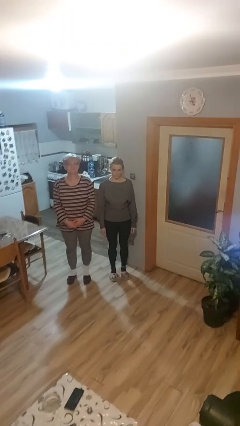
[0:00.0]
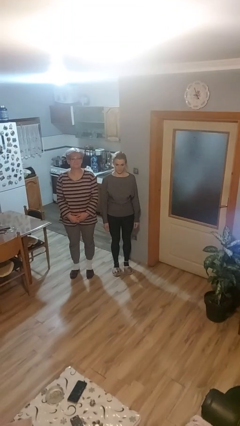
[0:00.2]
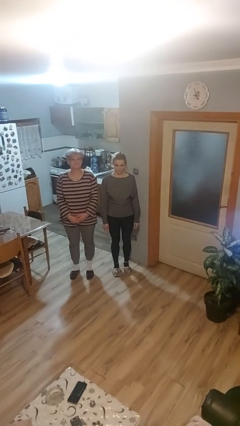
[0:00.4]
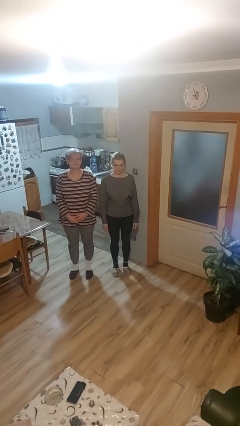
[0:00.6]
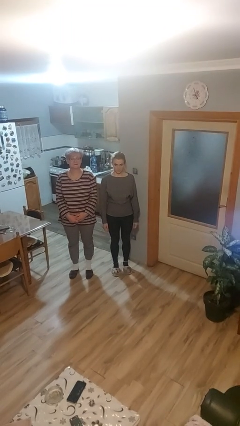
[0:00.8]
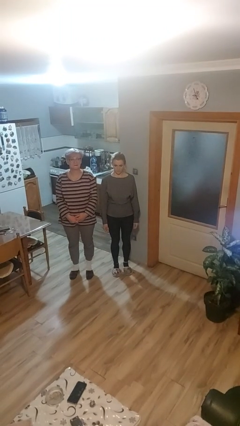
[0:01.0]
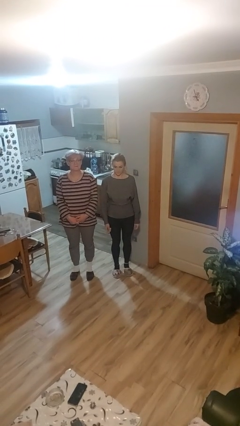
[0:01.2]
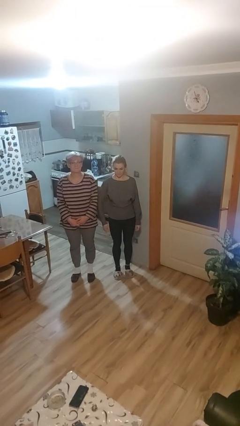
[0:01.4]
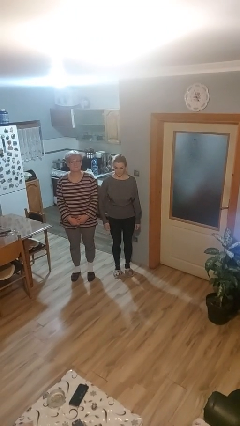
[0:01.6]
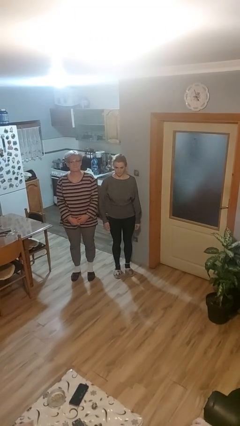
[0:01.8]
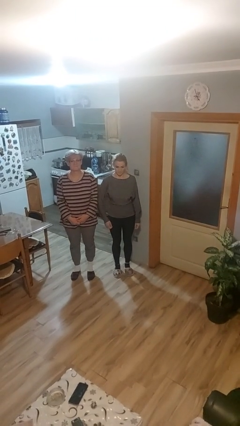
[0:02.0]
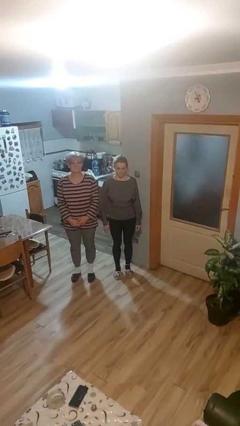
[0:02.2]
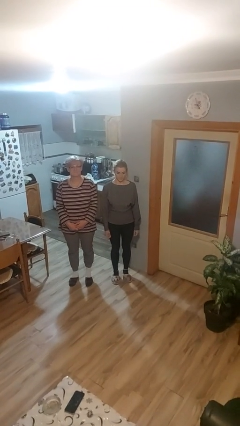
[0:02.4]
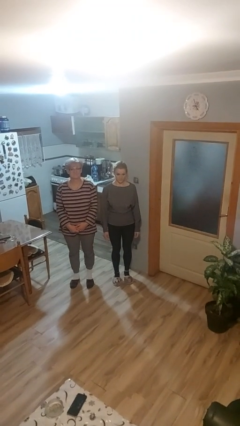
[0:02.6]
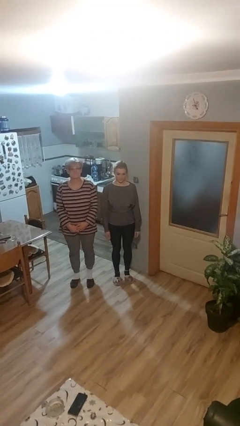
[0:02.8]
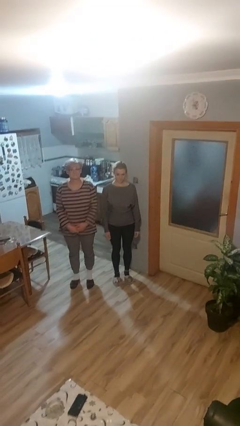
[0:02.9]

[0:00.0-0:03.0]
person nudges person with elbow

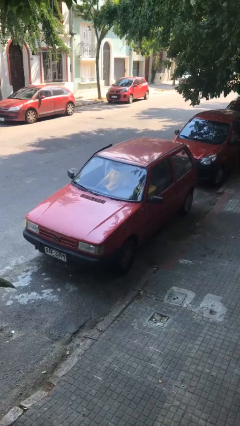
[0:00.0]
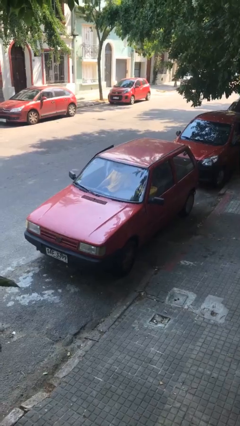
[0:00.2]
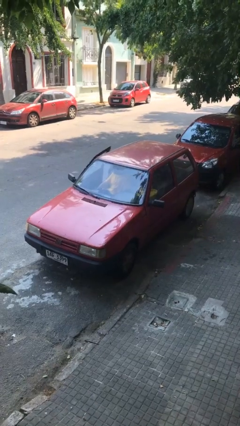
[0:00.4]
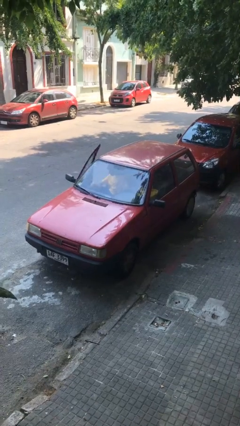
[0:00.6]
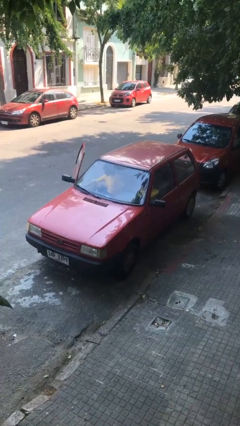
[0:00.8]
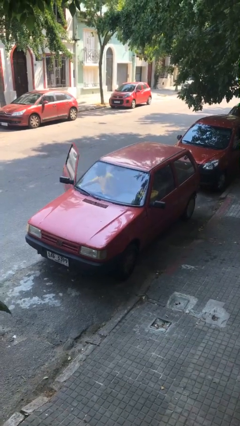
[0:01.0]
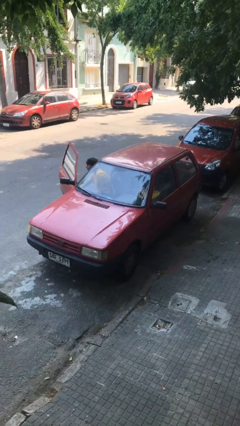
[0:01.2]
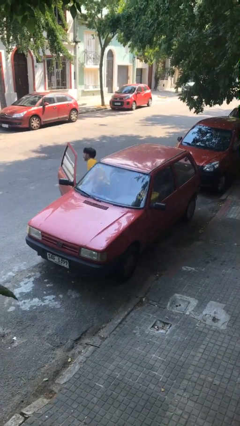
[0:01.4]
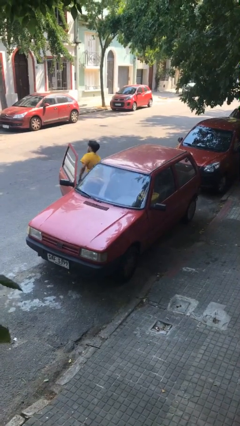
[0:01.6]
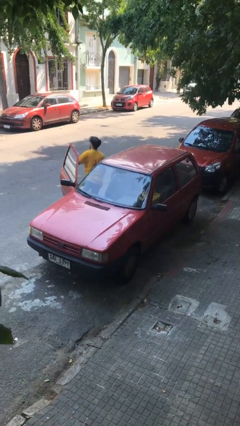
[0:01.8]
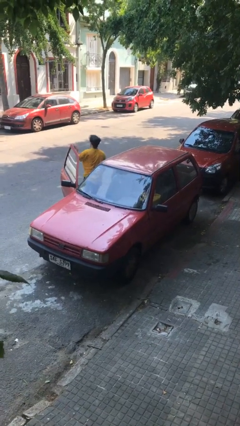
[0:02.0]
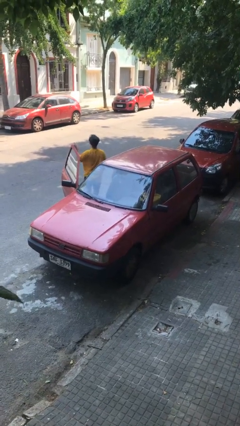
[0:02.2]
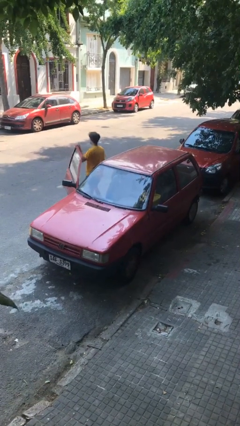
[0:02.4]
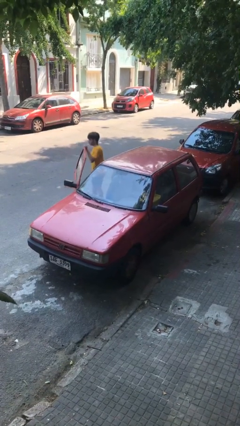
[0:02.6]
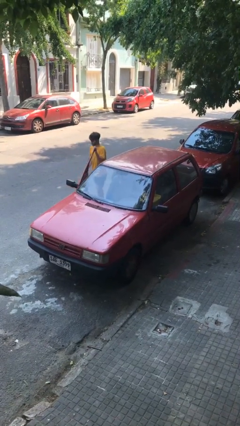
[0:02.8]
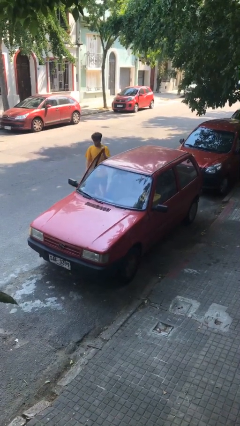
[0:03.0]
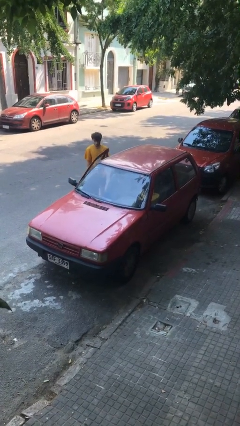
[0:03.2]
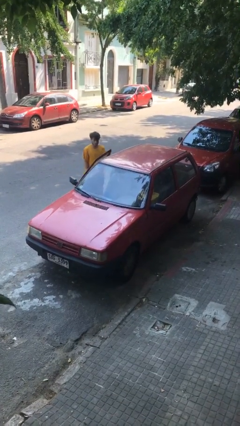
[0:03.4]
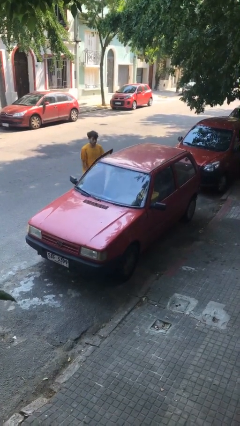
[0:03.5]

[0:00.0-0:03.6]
car drops off person

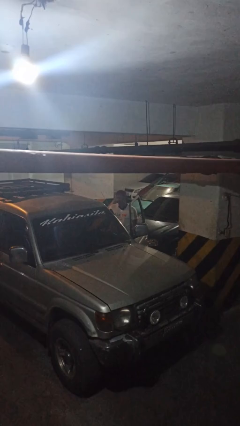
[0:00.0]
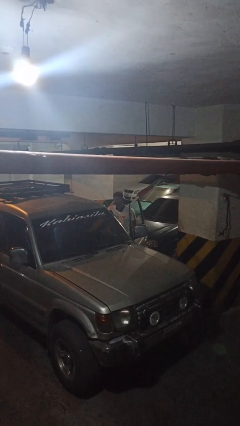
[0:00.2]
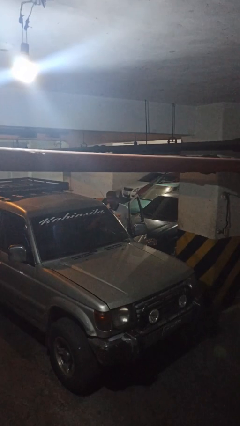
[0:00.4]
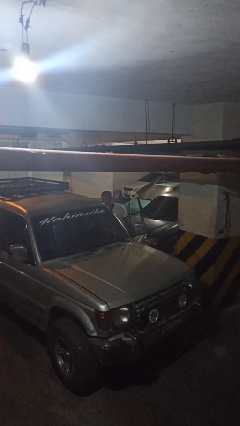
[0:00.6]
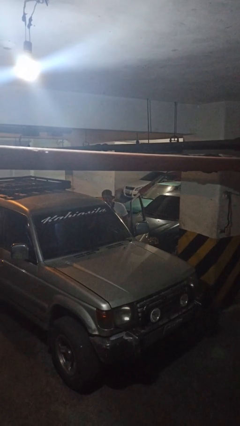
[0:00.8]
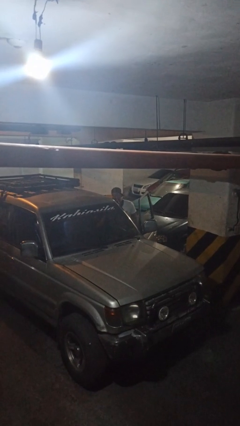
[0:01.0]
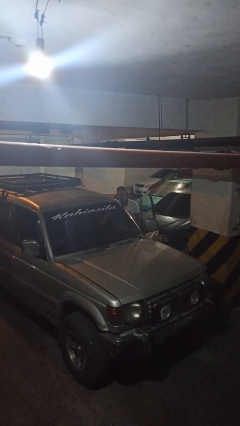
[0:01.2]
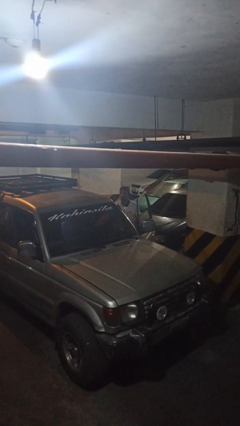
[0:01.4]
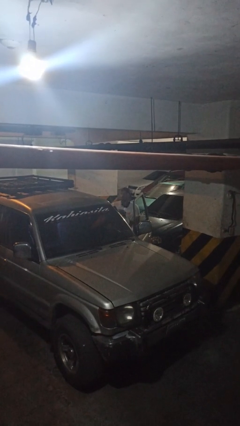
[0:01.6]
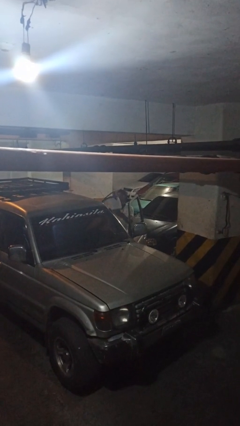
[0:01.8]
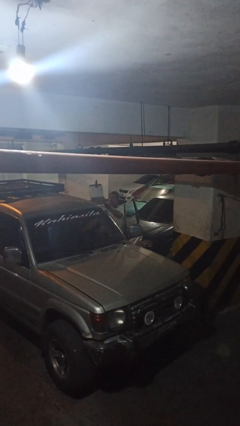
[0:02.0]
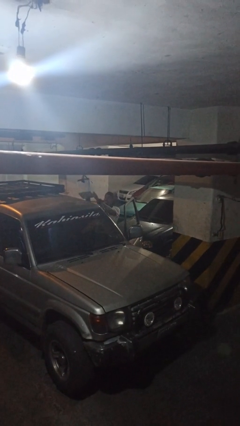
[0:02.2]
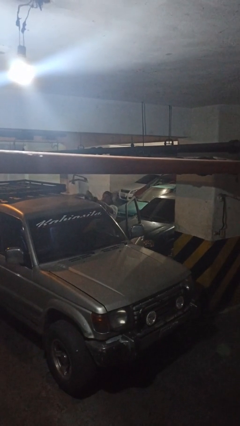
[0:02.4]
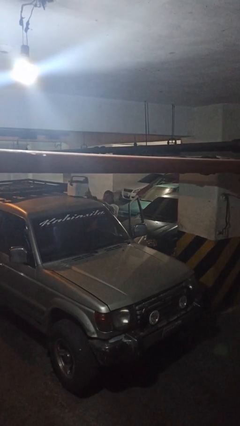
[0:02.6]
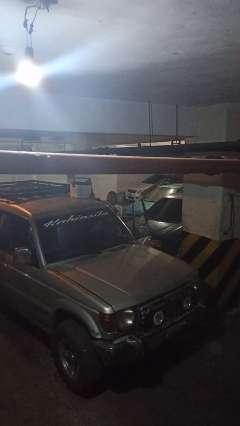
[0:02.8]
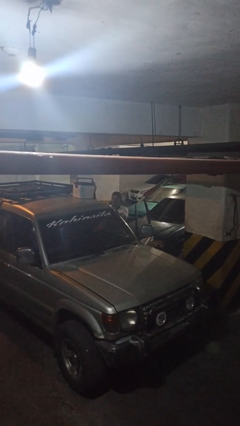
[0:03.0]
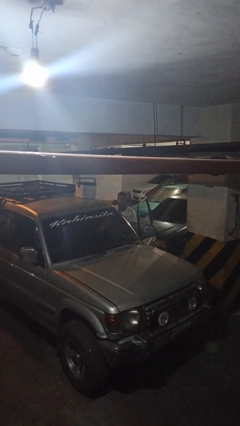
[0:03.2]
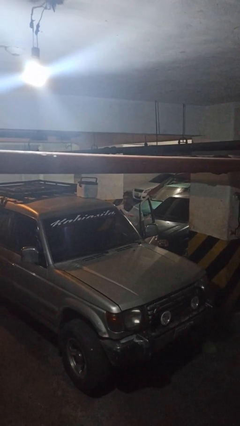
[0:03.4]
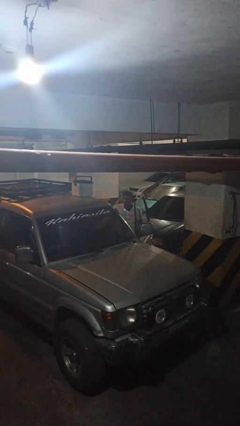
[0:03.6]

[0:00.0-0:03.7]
person unloads car

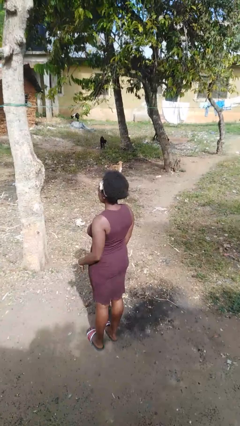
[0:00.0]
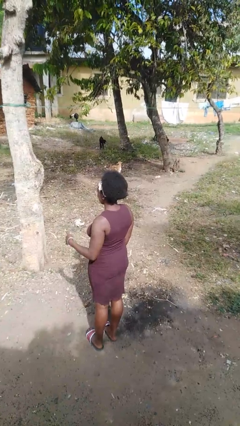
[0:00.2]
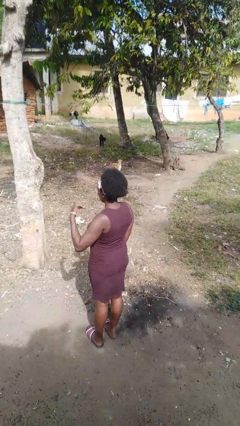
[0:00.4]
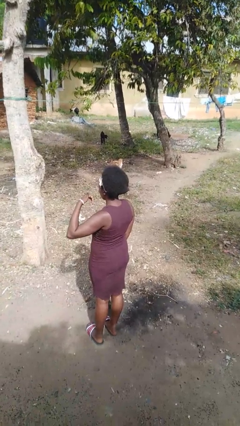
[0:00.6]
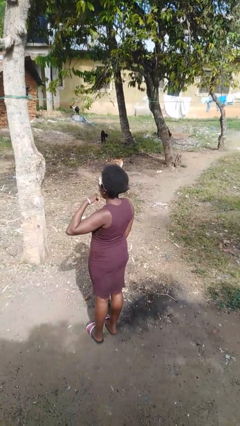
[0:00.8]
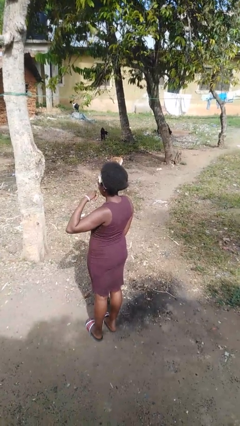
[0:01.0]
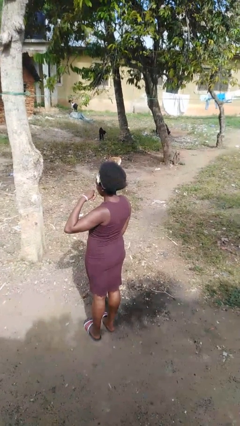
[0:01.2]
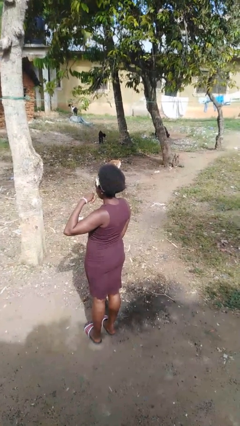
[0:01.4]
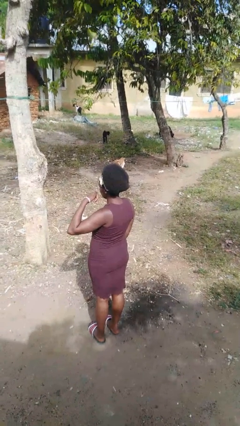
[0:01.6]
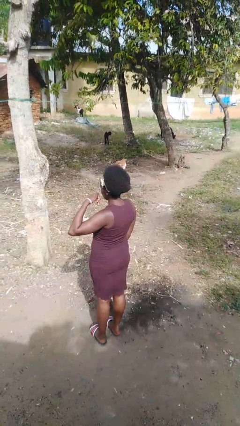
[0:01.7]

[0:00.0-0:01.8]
person gestures call me

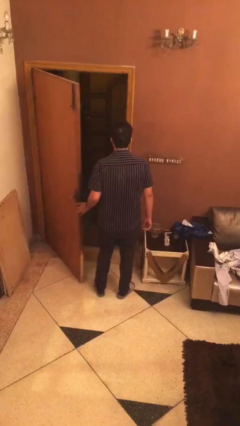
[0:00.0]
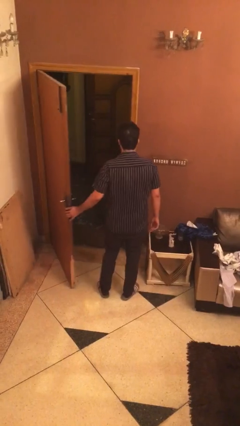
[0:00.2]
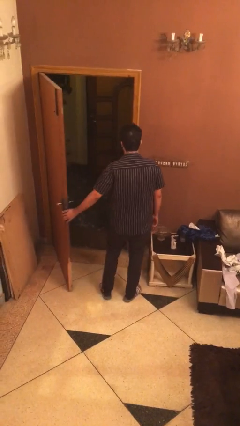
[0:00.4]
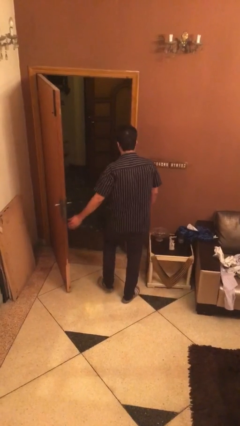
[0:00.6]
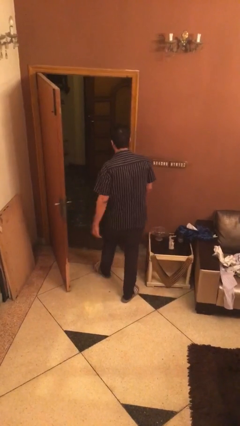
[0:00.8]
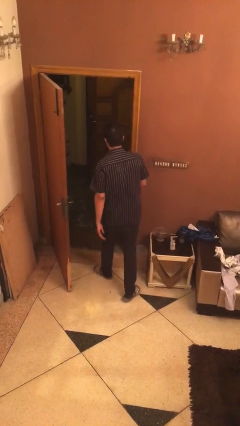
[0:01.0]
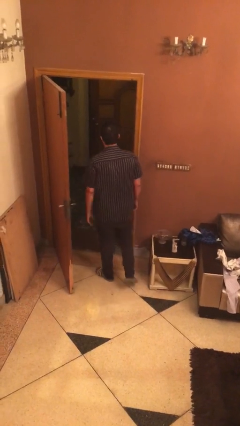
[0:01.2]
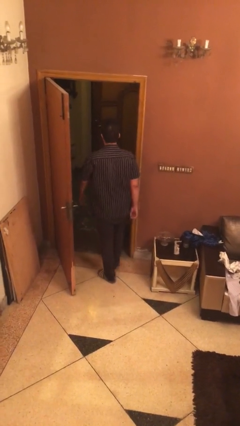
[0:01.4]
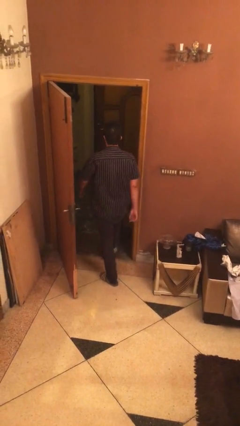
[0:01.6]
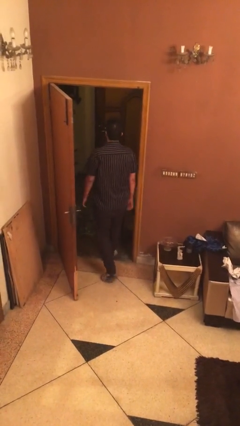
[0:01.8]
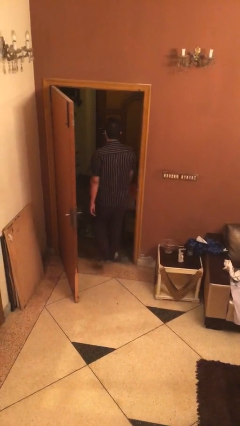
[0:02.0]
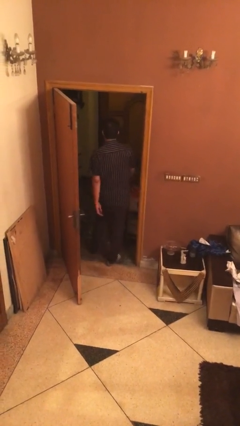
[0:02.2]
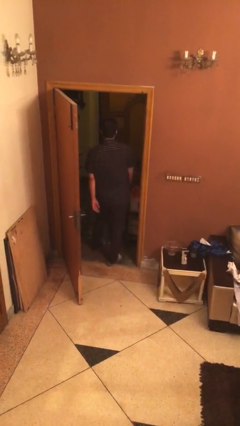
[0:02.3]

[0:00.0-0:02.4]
person exits scene through structure

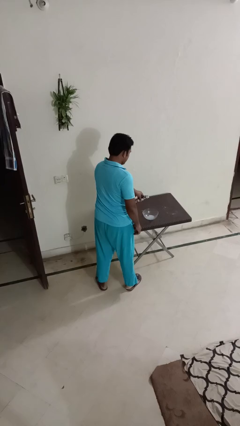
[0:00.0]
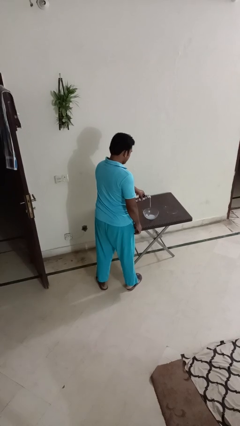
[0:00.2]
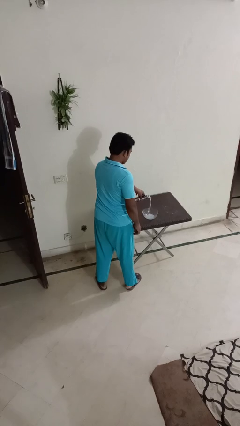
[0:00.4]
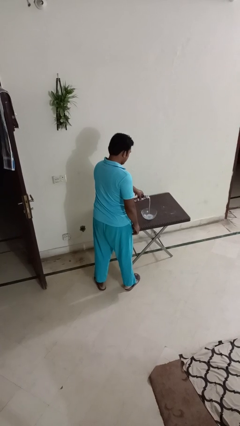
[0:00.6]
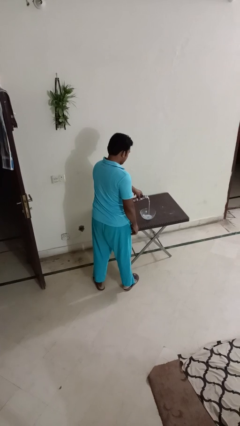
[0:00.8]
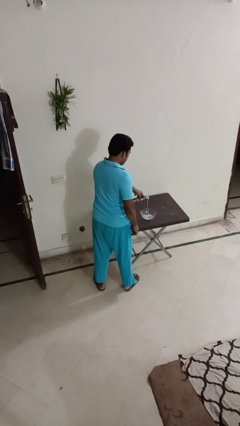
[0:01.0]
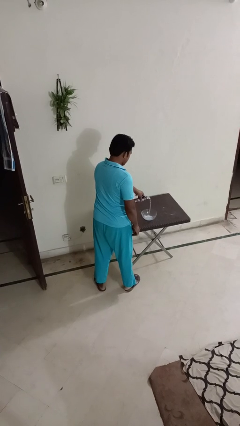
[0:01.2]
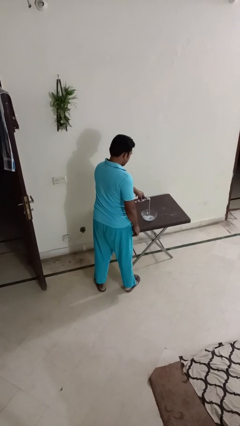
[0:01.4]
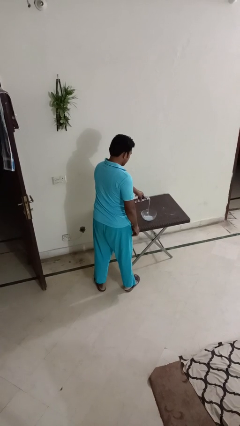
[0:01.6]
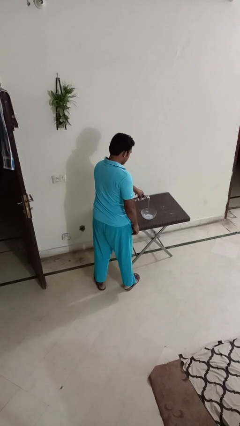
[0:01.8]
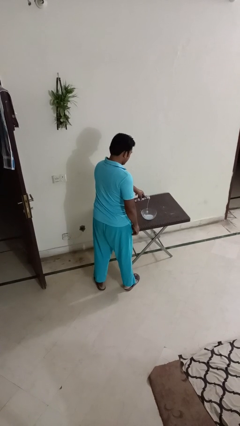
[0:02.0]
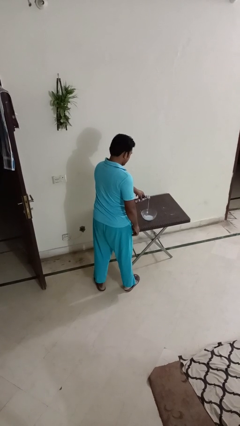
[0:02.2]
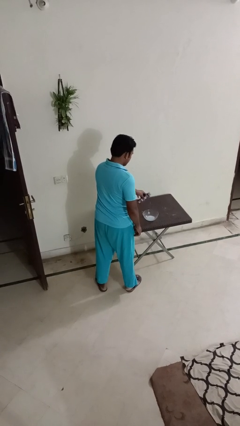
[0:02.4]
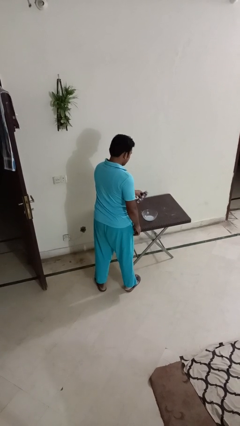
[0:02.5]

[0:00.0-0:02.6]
person pours into bowl

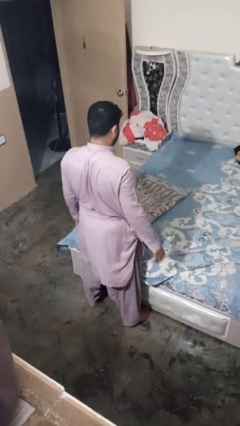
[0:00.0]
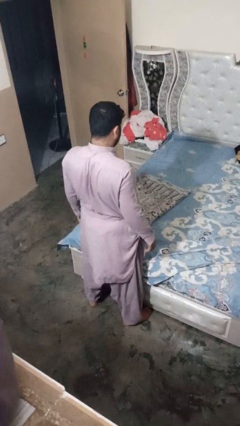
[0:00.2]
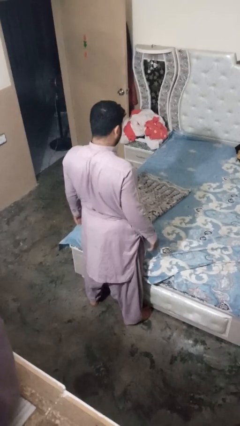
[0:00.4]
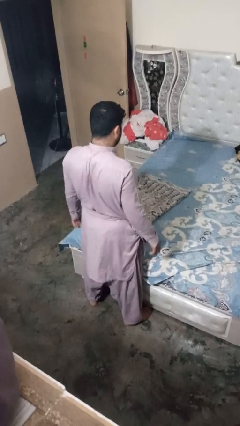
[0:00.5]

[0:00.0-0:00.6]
person unfolds blanket
